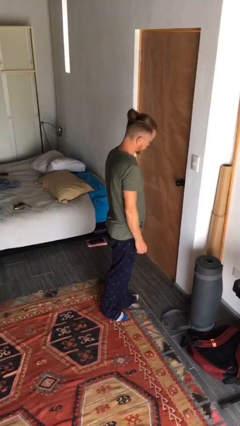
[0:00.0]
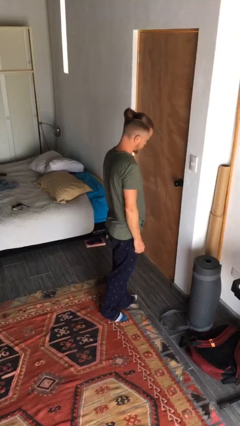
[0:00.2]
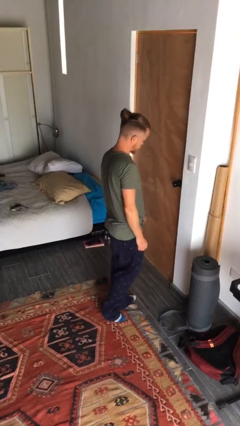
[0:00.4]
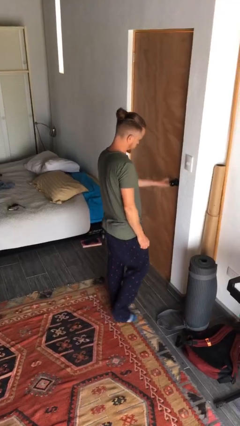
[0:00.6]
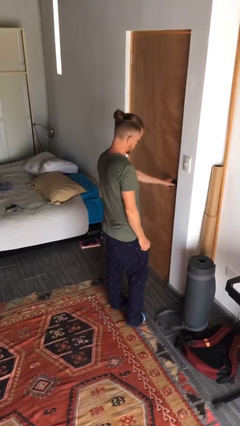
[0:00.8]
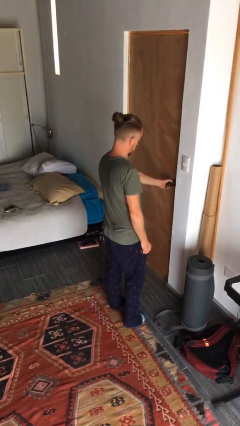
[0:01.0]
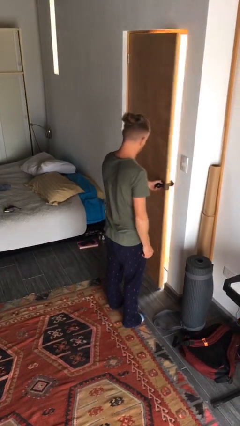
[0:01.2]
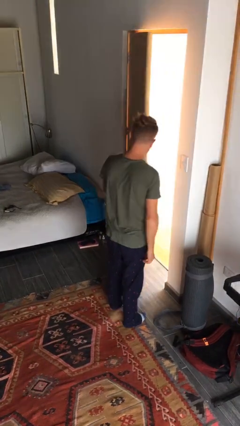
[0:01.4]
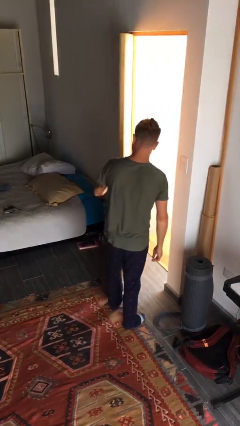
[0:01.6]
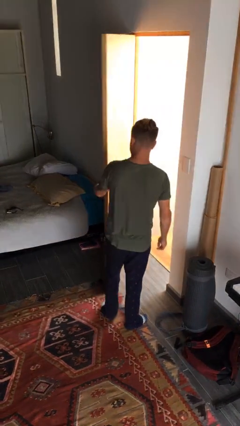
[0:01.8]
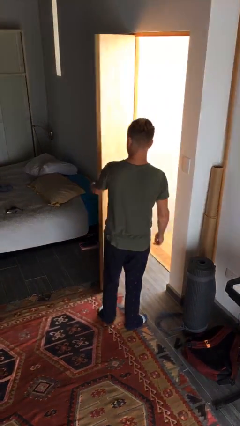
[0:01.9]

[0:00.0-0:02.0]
person opens facility door

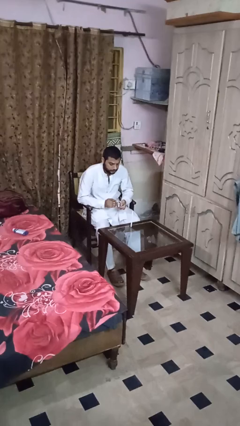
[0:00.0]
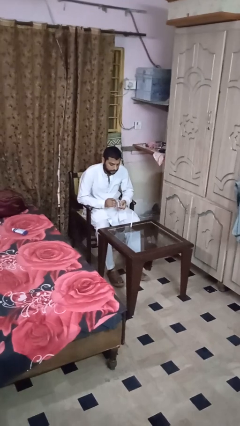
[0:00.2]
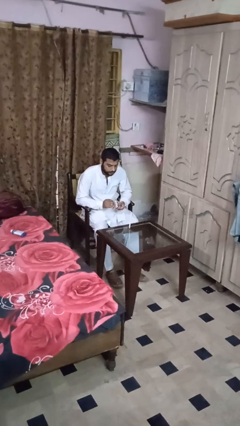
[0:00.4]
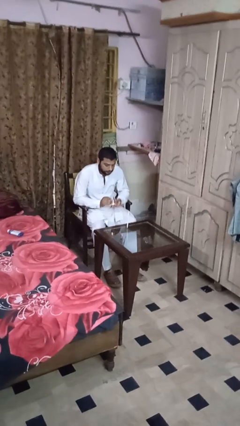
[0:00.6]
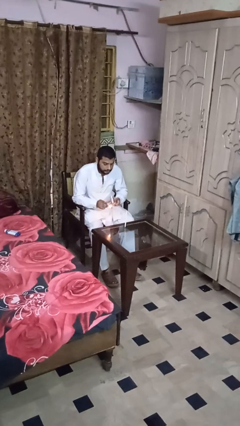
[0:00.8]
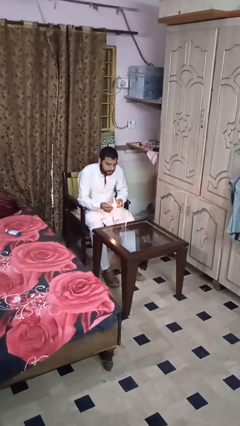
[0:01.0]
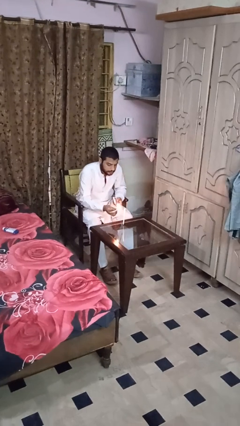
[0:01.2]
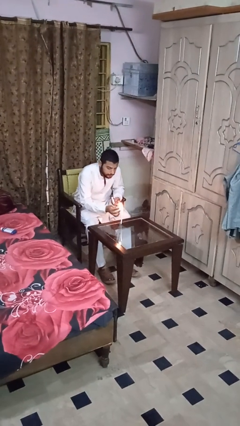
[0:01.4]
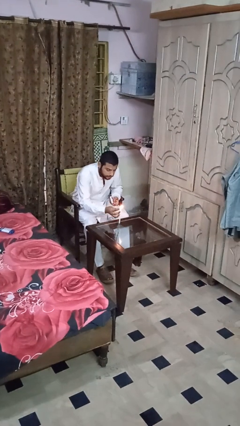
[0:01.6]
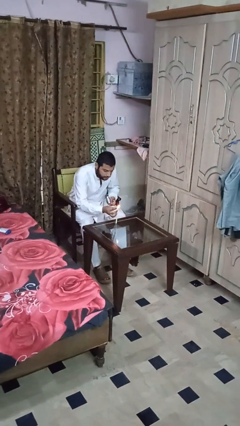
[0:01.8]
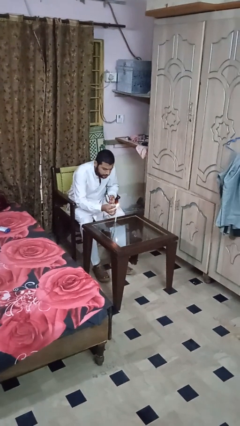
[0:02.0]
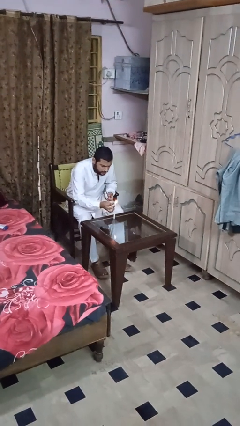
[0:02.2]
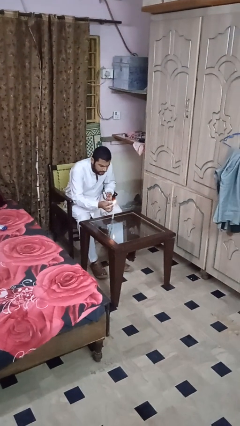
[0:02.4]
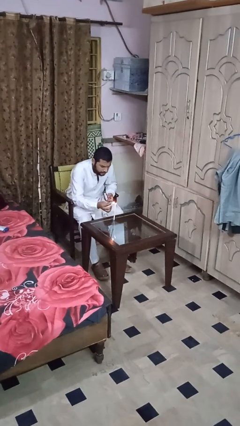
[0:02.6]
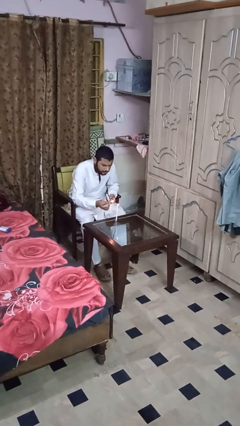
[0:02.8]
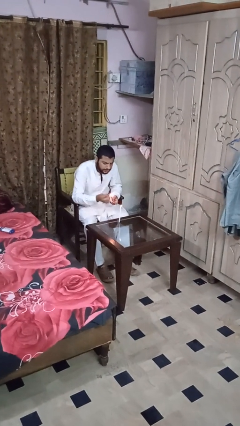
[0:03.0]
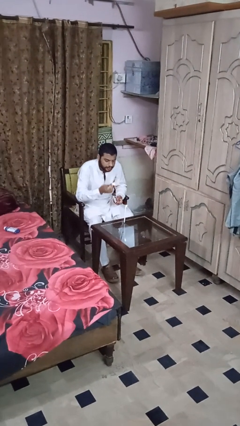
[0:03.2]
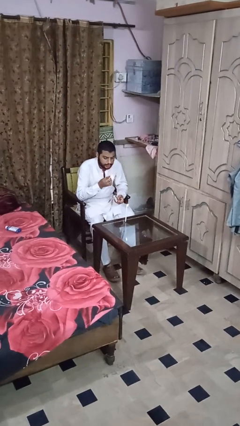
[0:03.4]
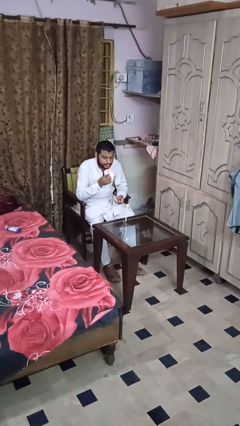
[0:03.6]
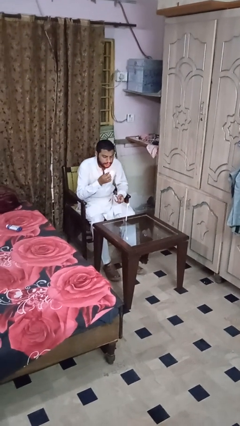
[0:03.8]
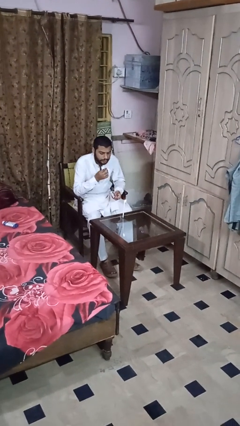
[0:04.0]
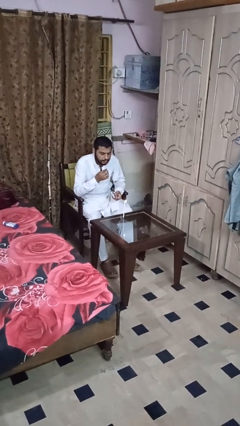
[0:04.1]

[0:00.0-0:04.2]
person lights candle

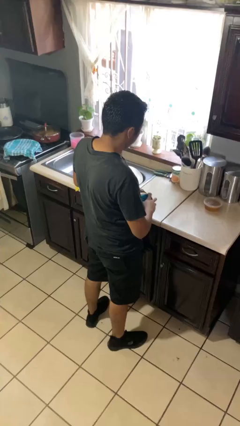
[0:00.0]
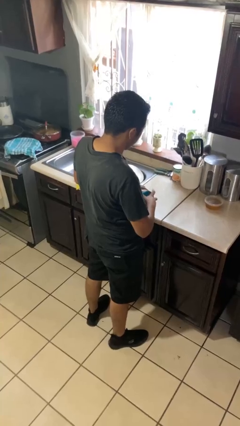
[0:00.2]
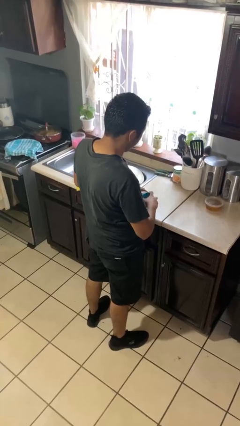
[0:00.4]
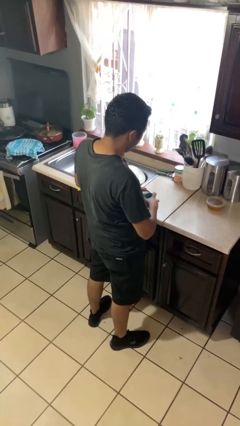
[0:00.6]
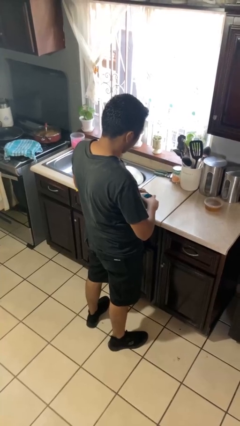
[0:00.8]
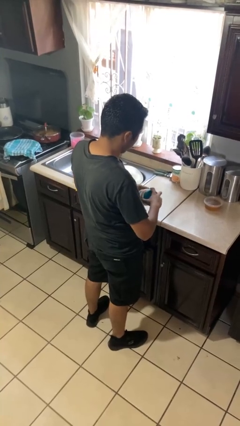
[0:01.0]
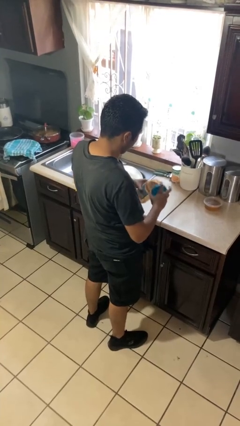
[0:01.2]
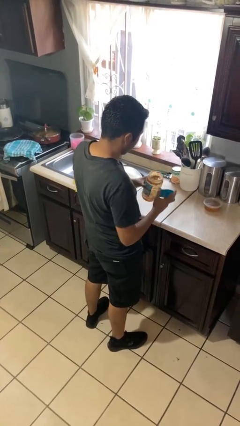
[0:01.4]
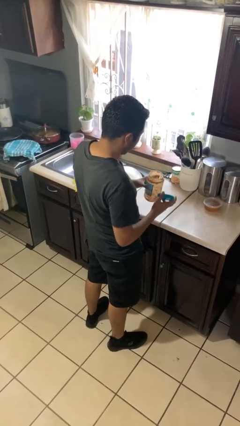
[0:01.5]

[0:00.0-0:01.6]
person opens jar

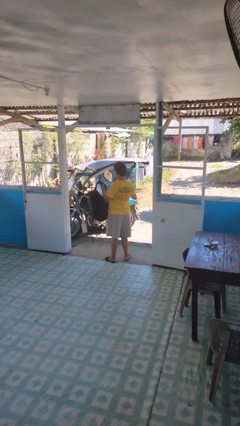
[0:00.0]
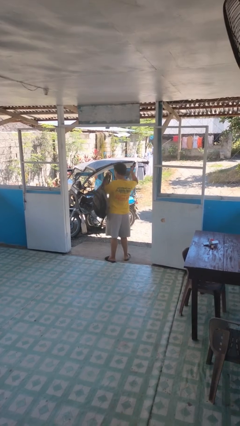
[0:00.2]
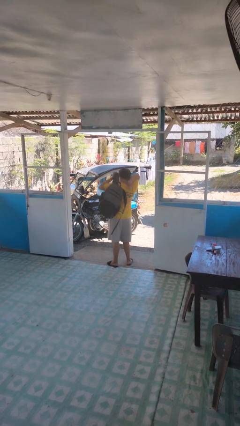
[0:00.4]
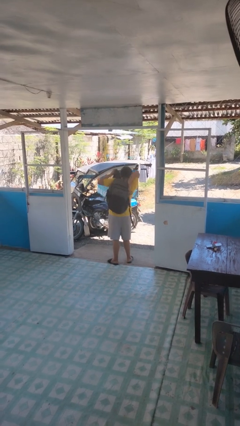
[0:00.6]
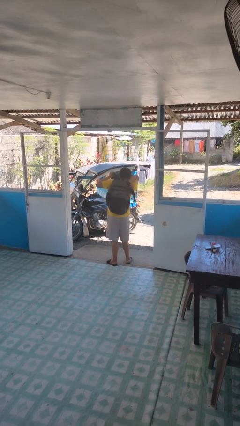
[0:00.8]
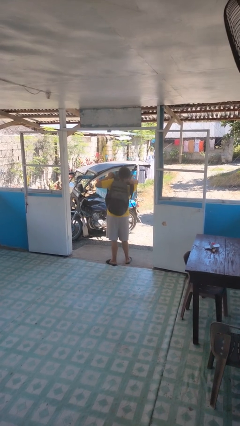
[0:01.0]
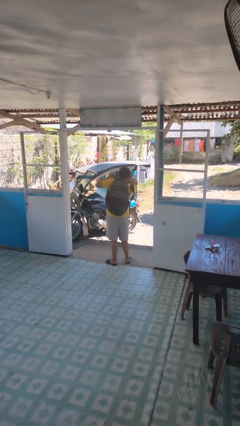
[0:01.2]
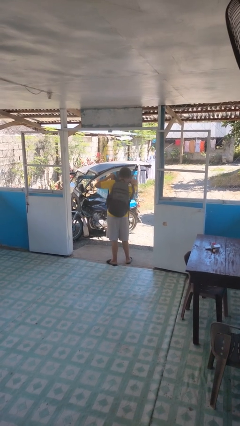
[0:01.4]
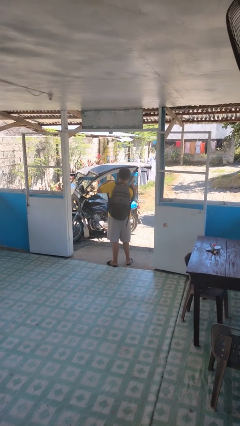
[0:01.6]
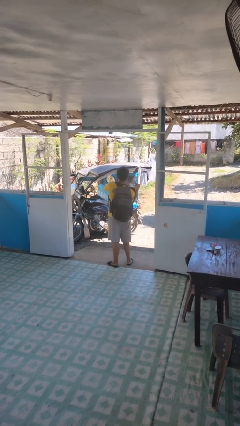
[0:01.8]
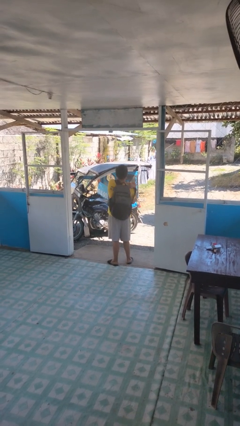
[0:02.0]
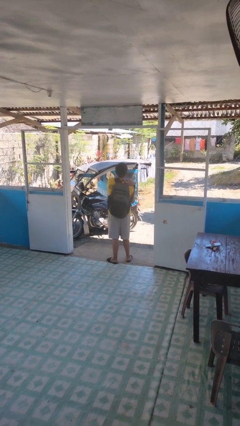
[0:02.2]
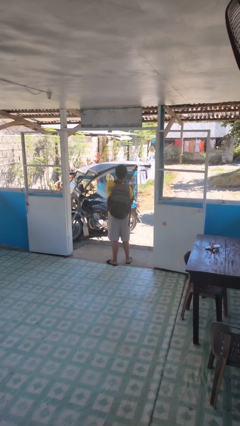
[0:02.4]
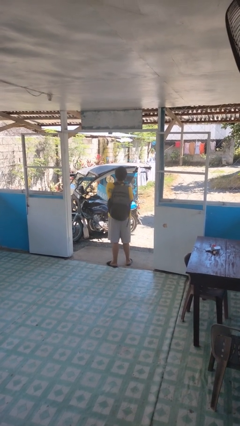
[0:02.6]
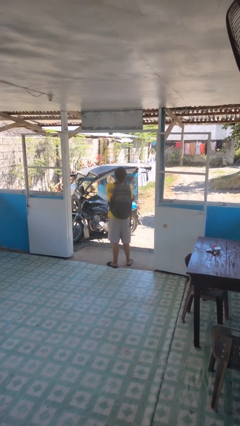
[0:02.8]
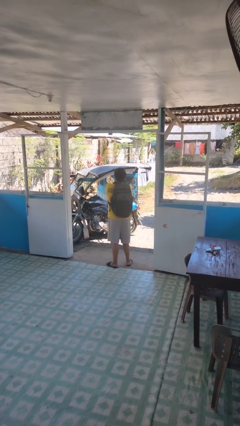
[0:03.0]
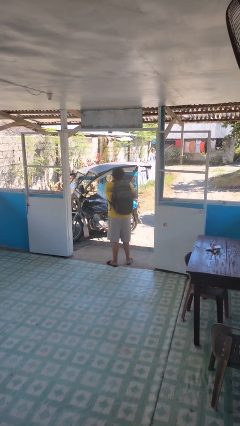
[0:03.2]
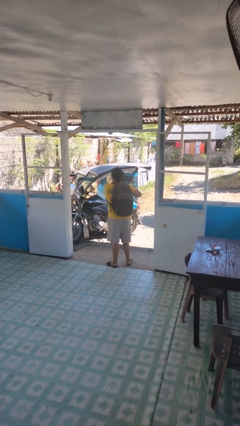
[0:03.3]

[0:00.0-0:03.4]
person puts on backpack

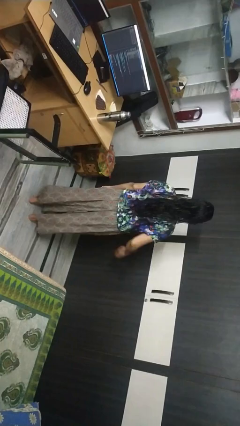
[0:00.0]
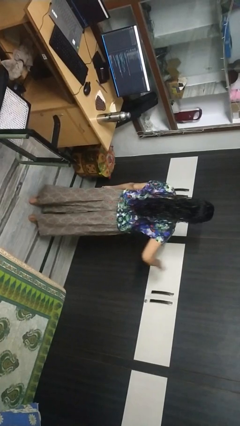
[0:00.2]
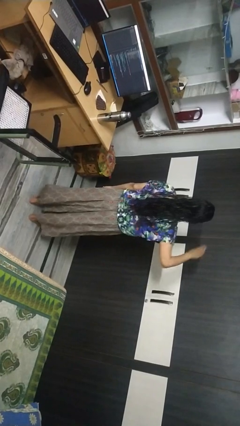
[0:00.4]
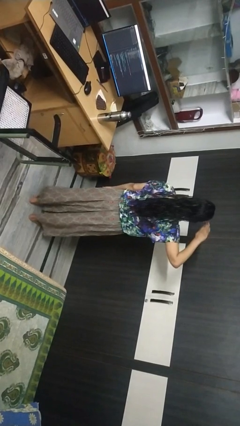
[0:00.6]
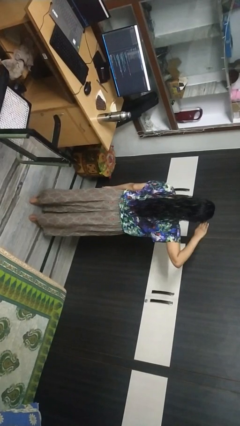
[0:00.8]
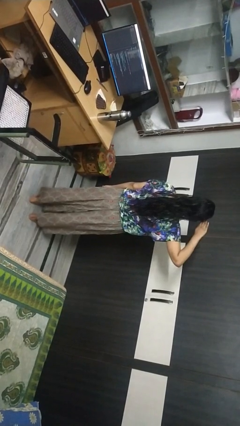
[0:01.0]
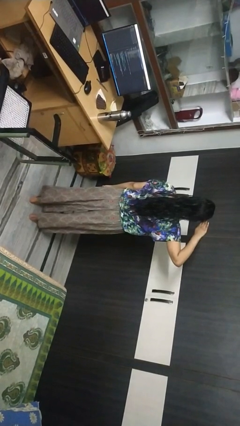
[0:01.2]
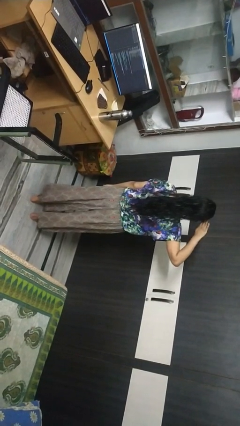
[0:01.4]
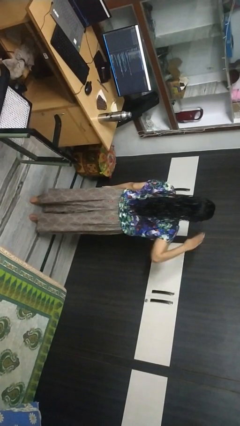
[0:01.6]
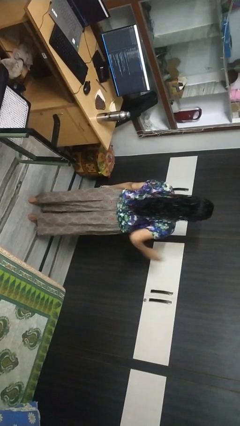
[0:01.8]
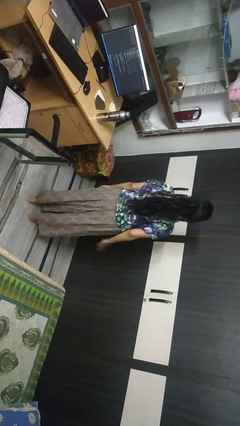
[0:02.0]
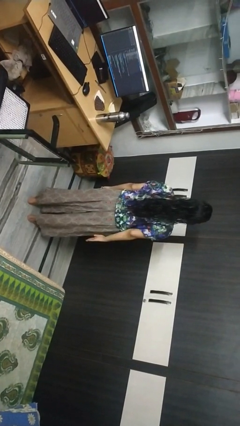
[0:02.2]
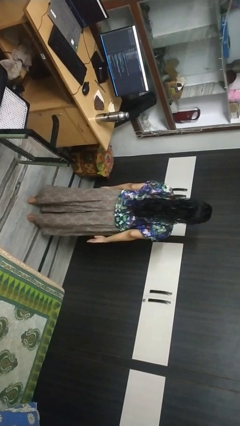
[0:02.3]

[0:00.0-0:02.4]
person salutes

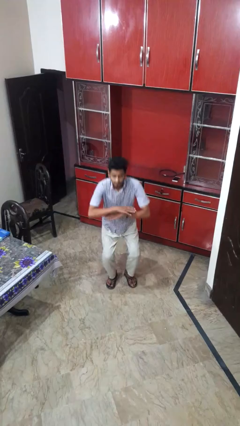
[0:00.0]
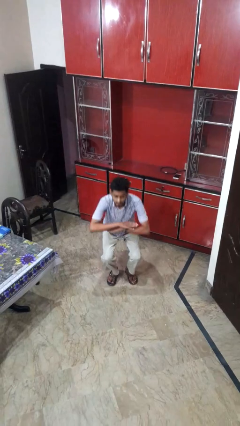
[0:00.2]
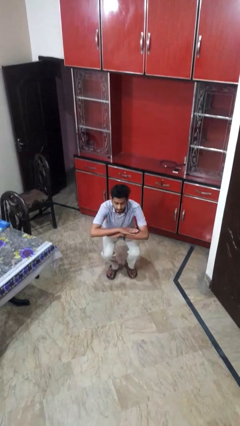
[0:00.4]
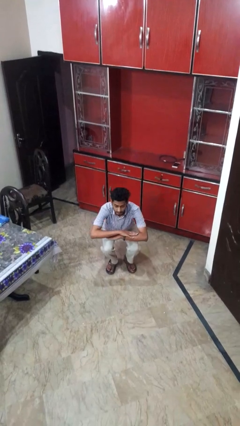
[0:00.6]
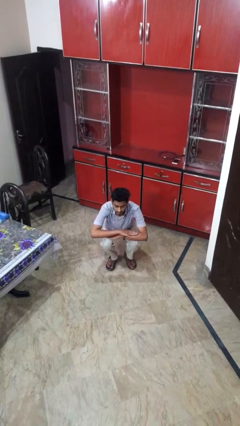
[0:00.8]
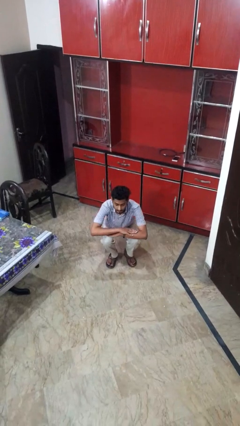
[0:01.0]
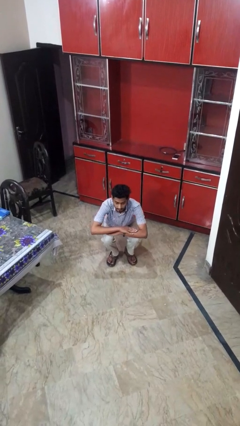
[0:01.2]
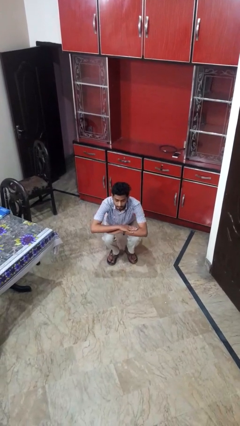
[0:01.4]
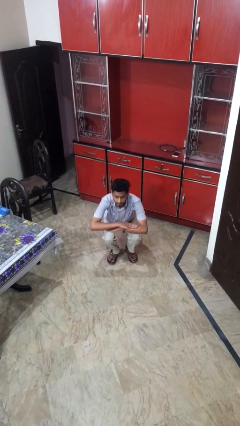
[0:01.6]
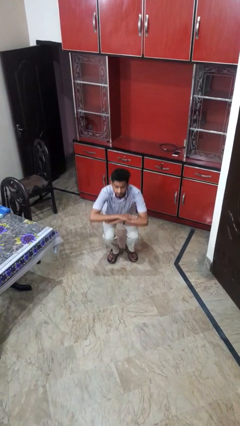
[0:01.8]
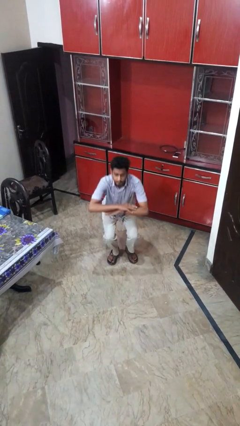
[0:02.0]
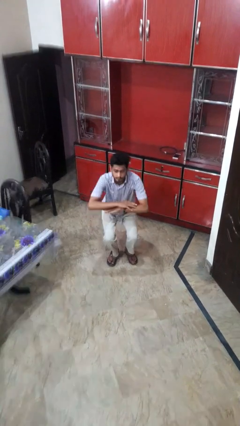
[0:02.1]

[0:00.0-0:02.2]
person squats

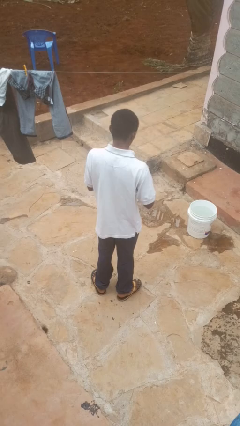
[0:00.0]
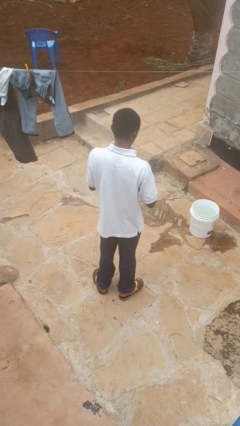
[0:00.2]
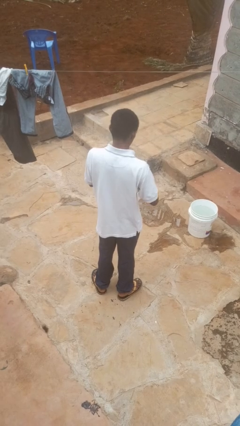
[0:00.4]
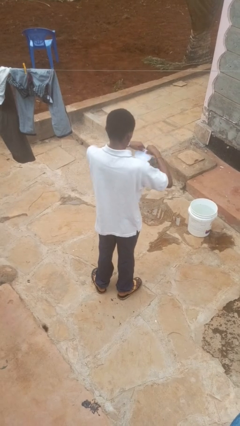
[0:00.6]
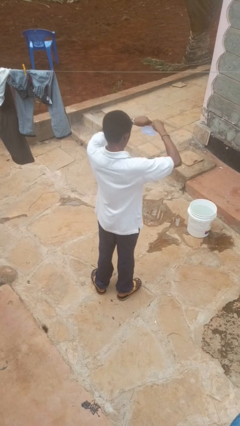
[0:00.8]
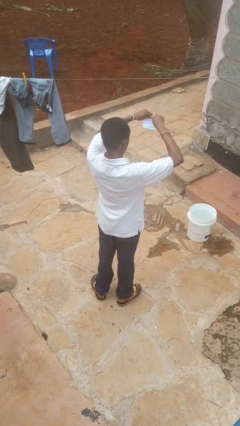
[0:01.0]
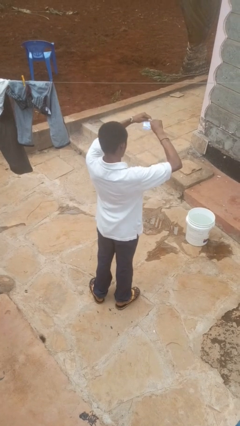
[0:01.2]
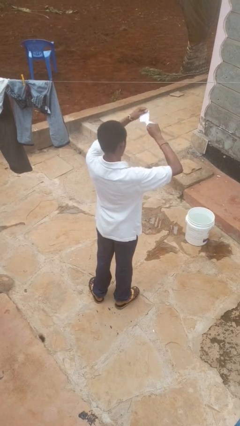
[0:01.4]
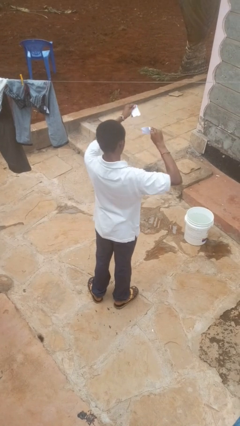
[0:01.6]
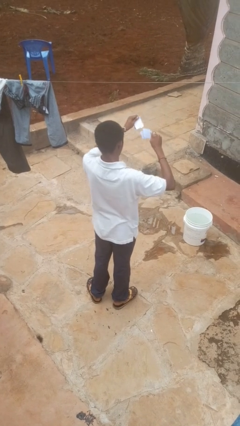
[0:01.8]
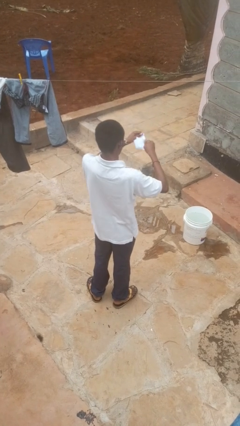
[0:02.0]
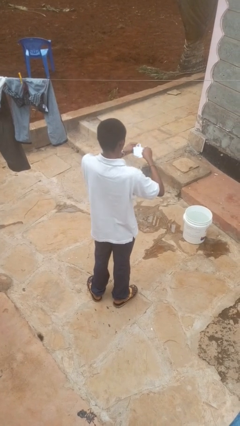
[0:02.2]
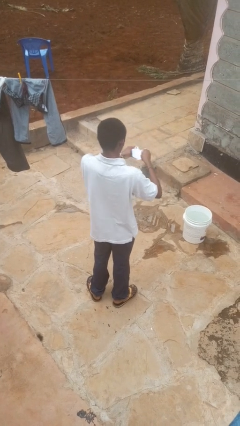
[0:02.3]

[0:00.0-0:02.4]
person tears paper
